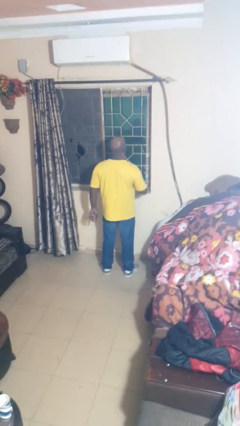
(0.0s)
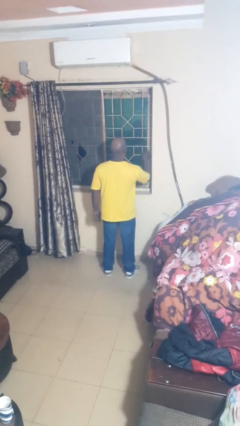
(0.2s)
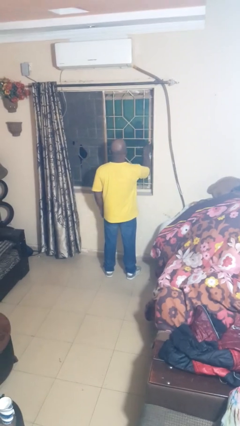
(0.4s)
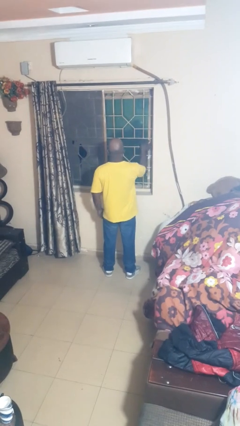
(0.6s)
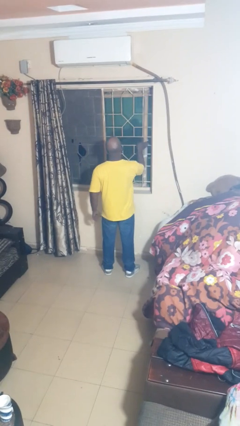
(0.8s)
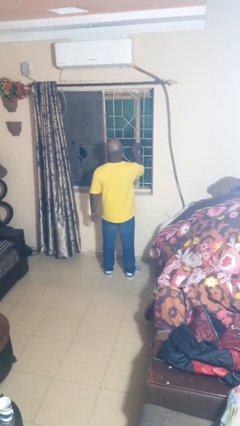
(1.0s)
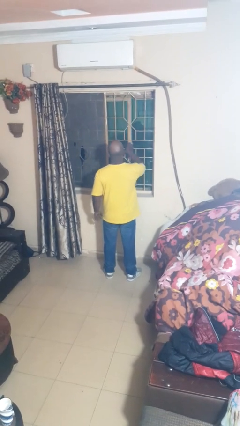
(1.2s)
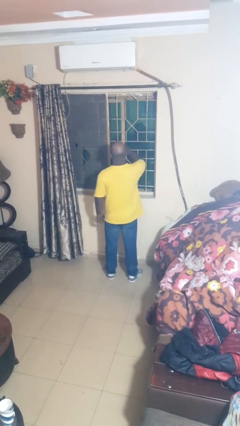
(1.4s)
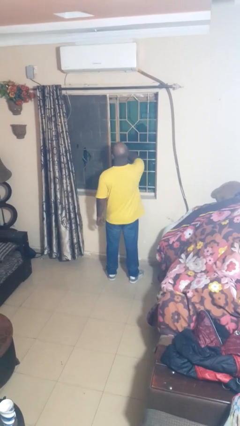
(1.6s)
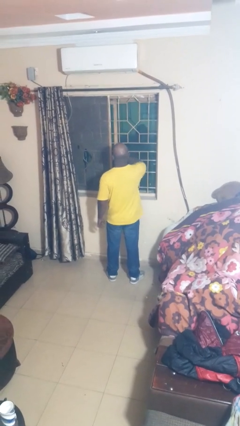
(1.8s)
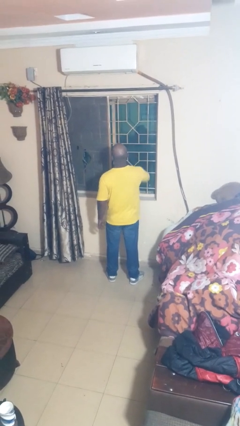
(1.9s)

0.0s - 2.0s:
person opens home window

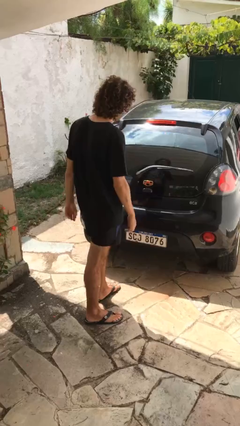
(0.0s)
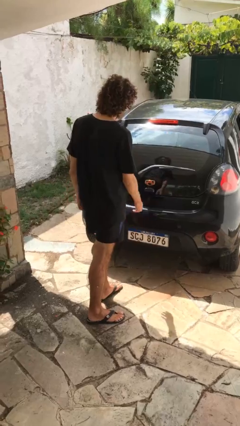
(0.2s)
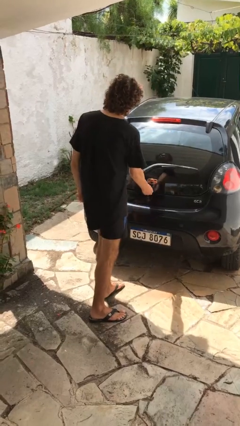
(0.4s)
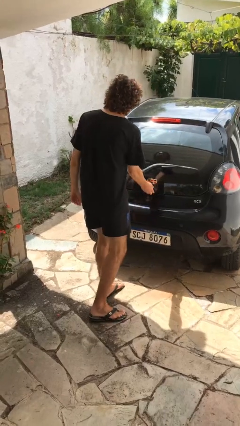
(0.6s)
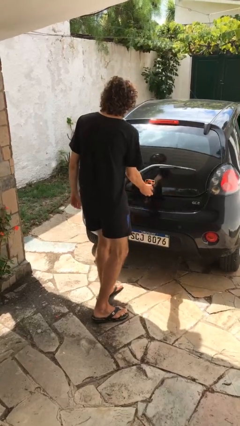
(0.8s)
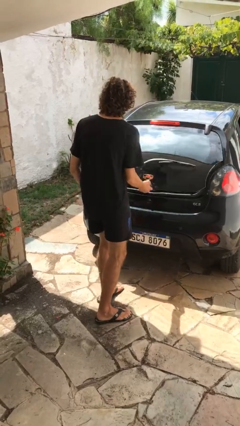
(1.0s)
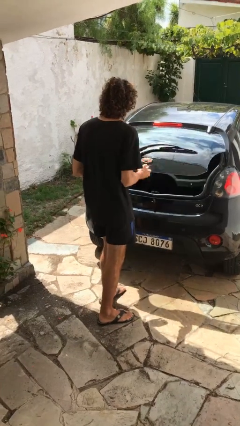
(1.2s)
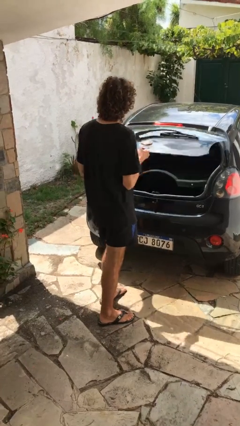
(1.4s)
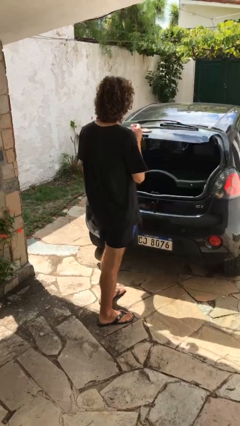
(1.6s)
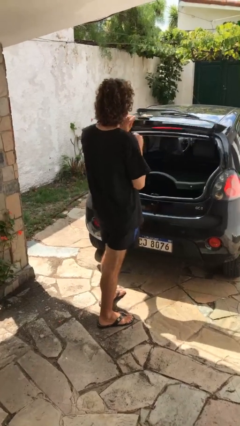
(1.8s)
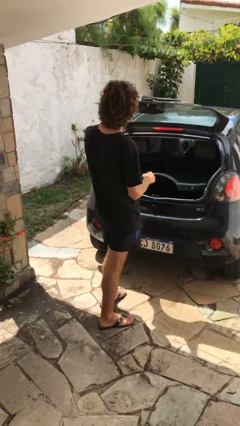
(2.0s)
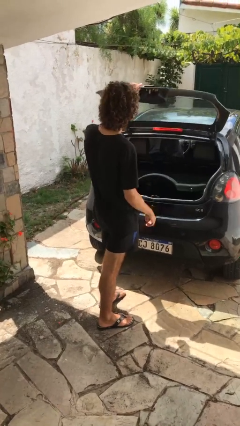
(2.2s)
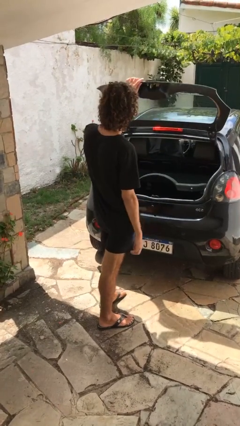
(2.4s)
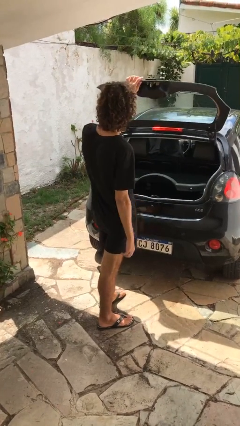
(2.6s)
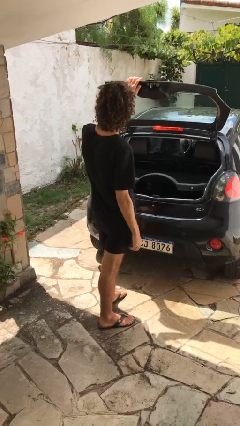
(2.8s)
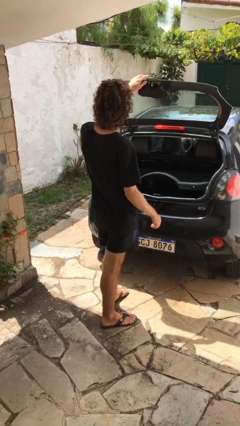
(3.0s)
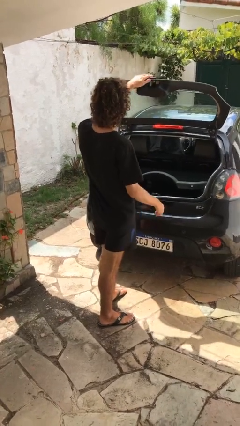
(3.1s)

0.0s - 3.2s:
person opens car trunk

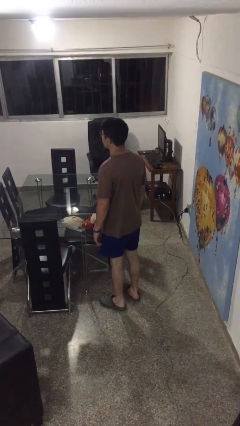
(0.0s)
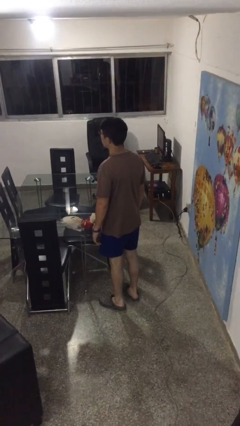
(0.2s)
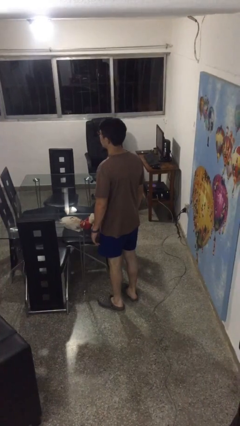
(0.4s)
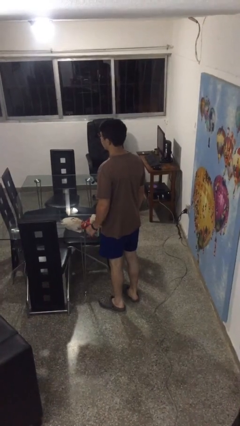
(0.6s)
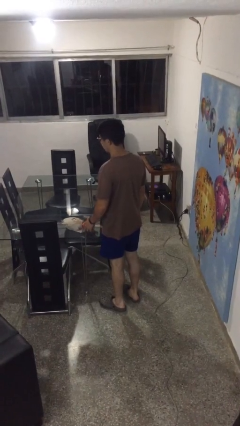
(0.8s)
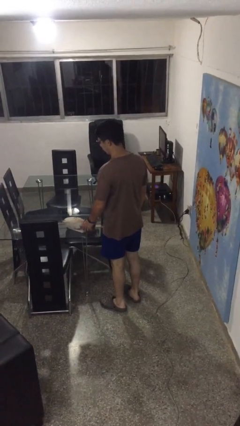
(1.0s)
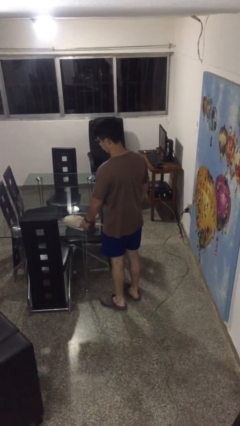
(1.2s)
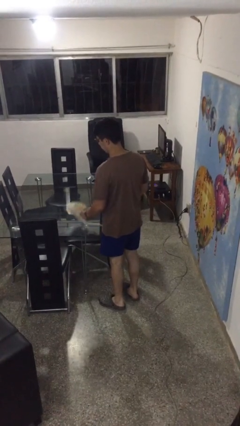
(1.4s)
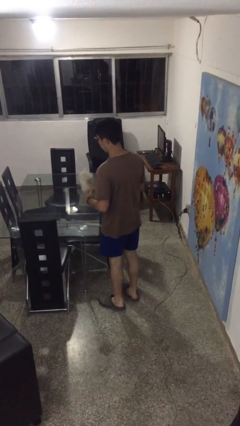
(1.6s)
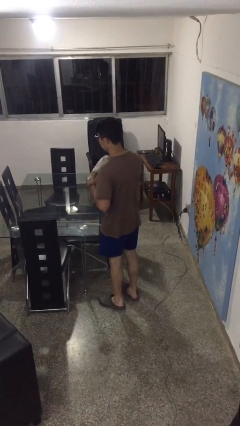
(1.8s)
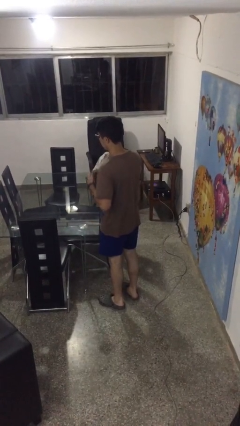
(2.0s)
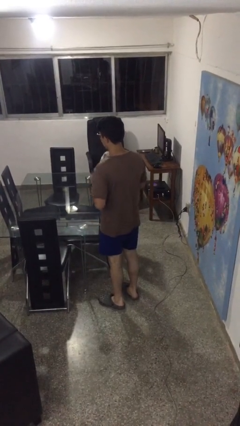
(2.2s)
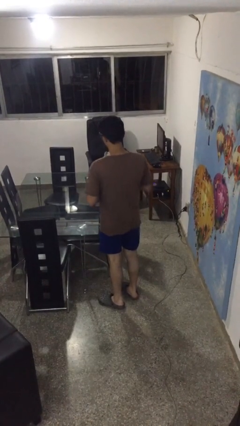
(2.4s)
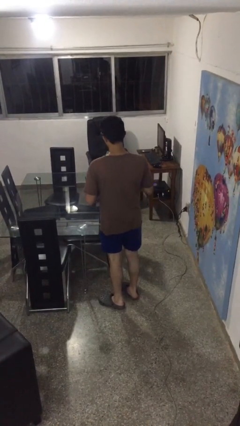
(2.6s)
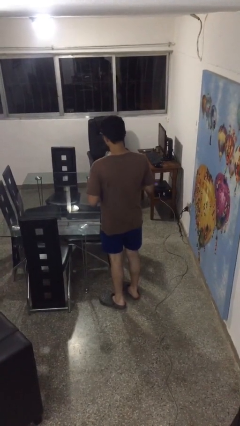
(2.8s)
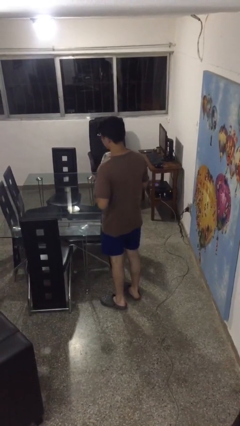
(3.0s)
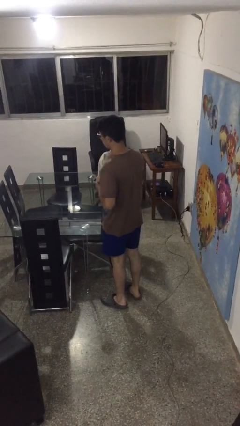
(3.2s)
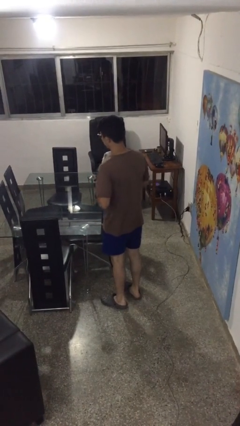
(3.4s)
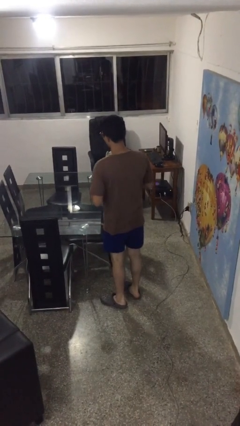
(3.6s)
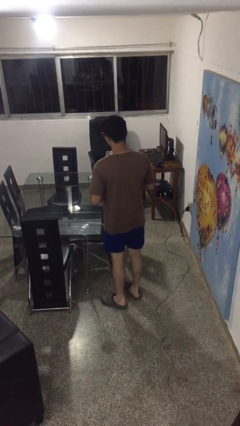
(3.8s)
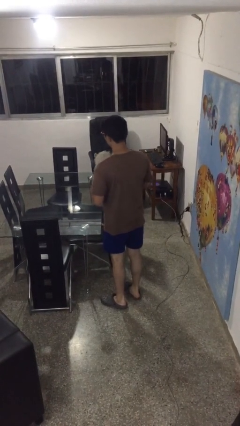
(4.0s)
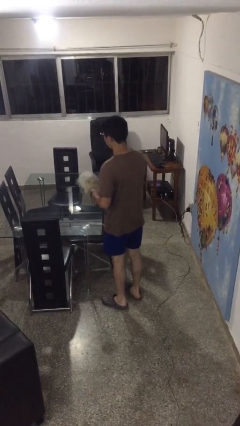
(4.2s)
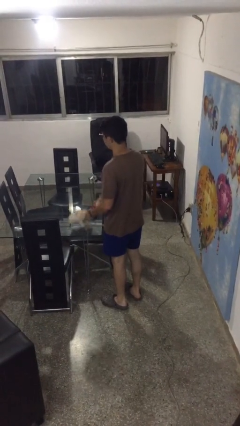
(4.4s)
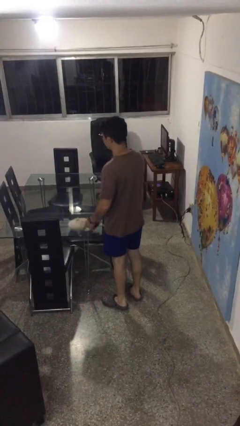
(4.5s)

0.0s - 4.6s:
person hugs stuffed animal

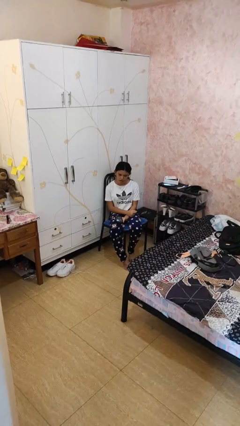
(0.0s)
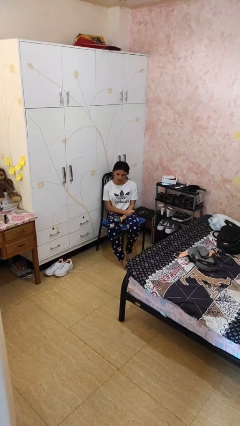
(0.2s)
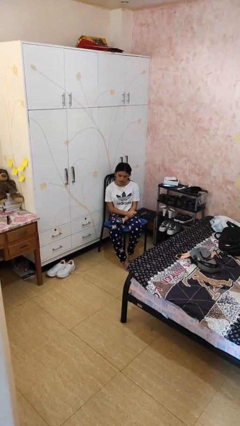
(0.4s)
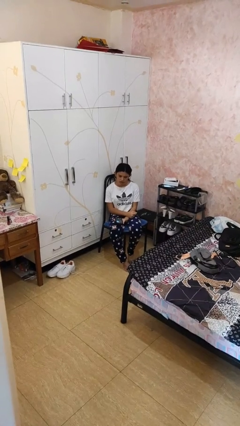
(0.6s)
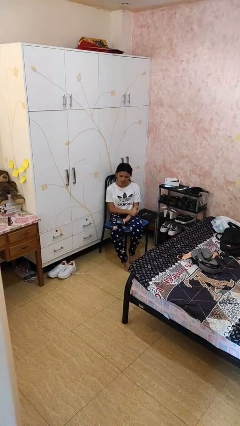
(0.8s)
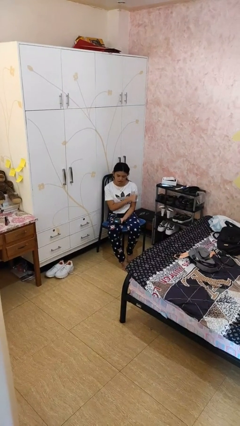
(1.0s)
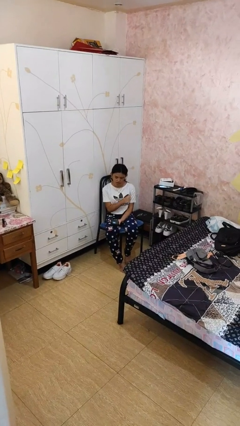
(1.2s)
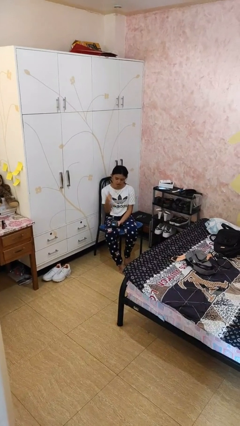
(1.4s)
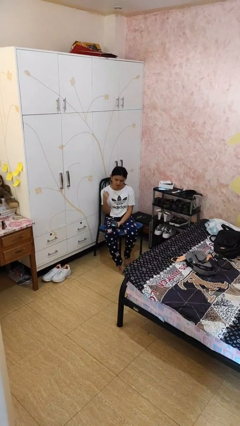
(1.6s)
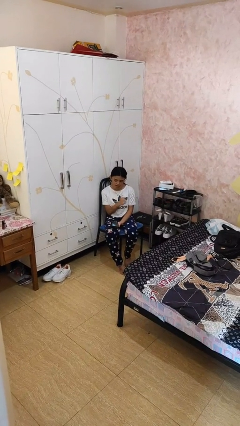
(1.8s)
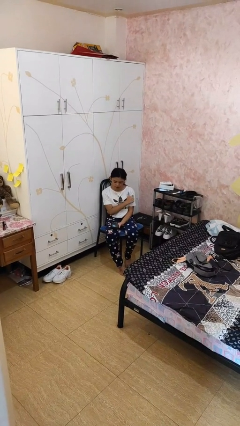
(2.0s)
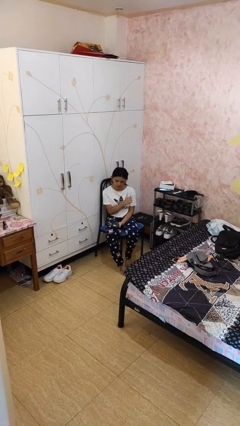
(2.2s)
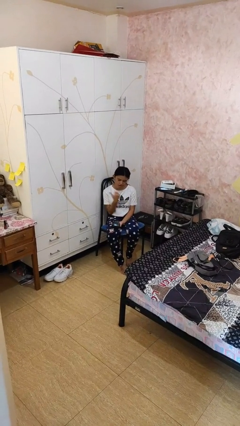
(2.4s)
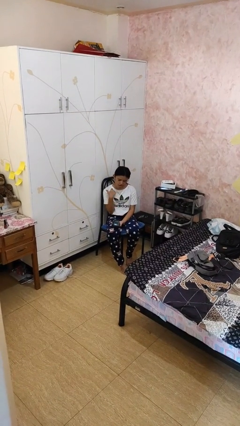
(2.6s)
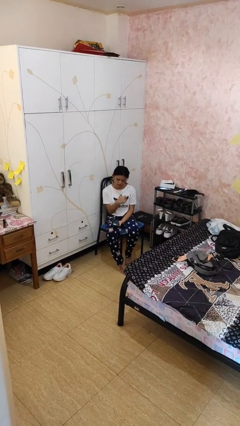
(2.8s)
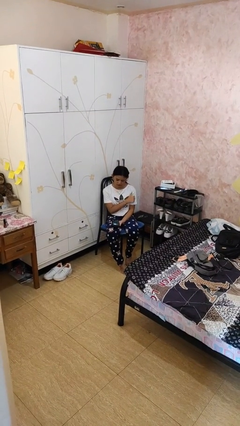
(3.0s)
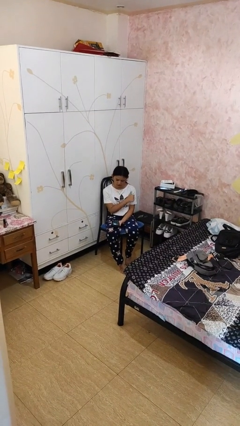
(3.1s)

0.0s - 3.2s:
person gestures cut

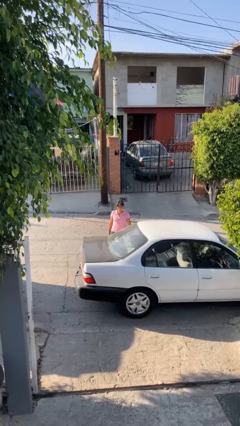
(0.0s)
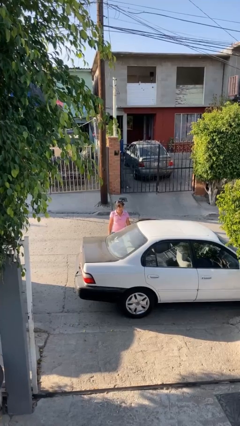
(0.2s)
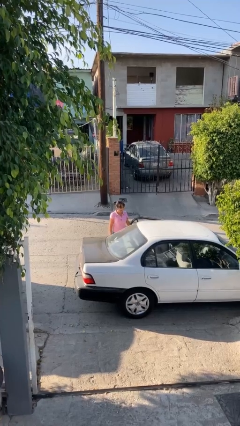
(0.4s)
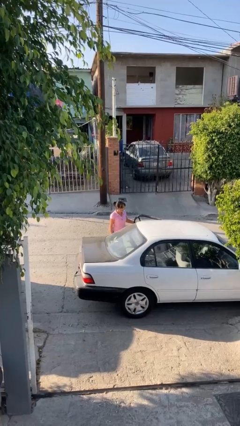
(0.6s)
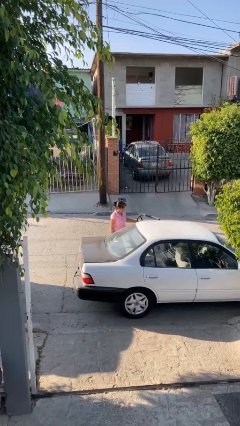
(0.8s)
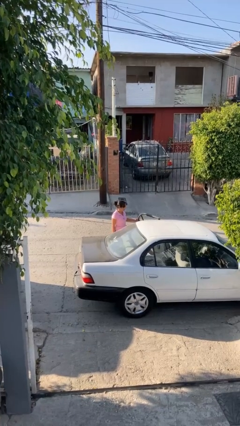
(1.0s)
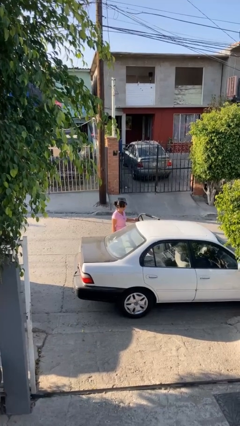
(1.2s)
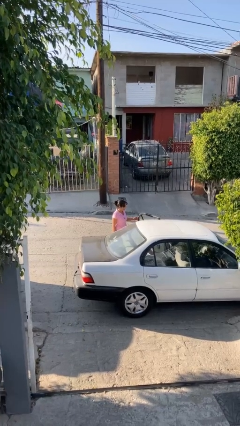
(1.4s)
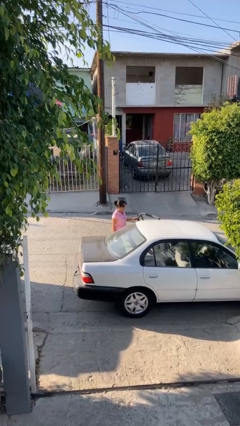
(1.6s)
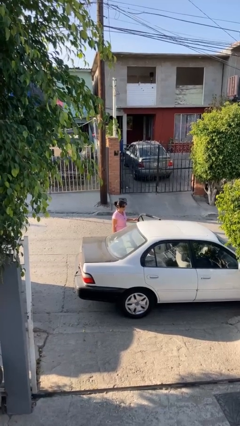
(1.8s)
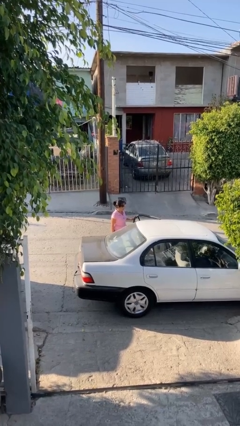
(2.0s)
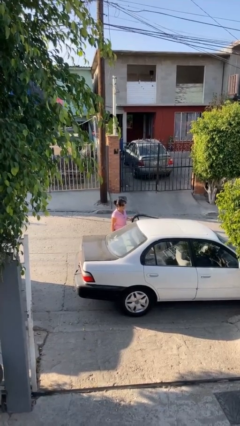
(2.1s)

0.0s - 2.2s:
person opens car door

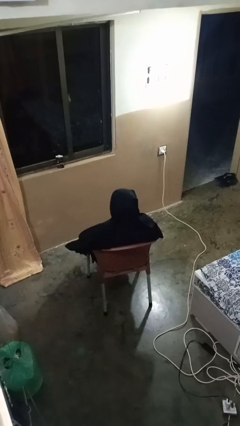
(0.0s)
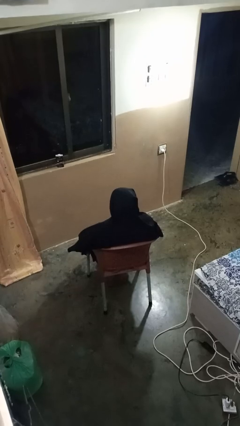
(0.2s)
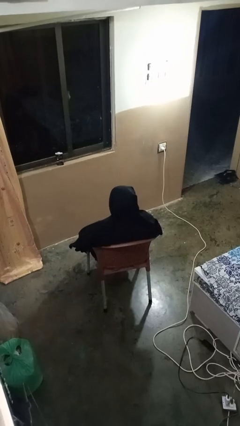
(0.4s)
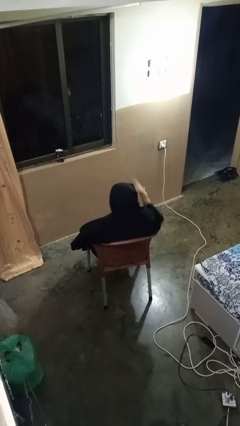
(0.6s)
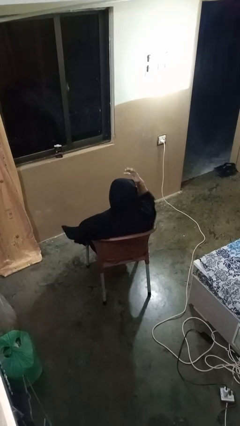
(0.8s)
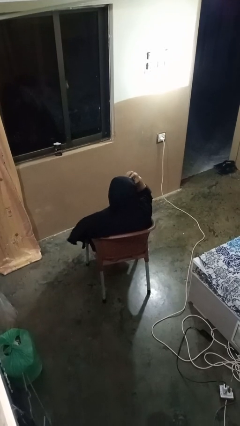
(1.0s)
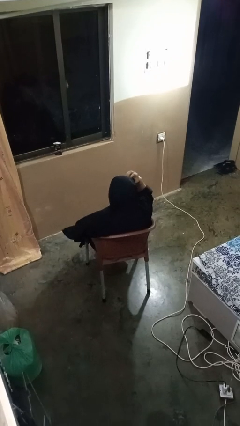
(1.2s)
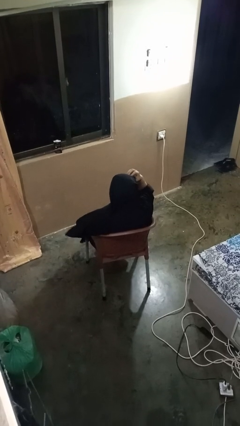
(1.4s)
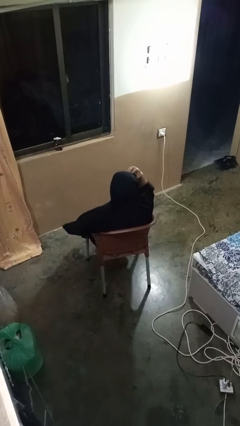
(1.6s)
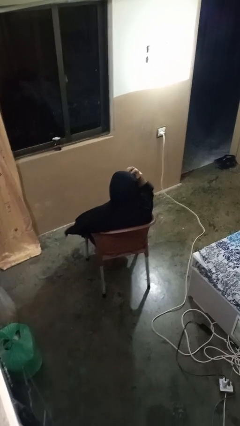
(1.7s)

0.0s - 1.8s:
person scratches face

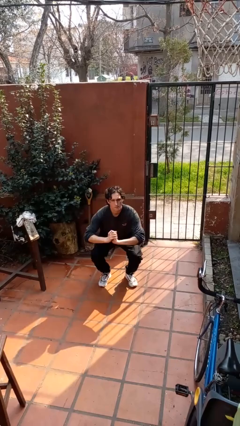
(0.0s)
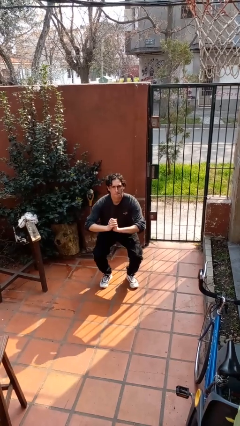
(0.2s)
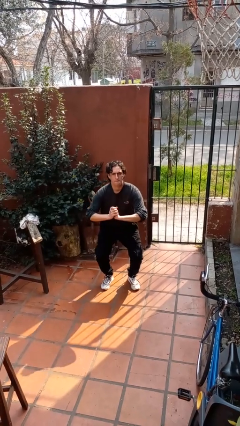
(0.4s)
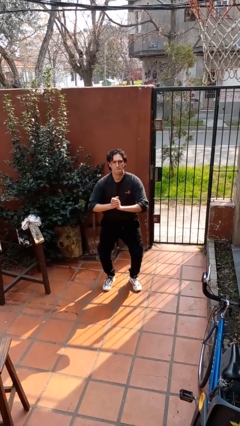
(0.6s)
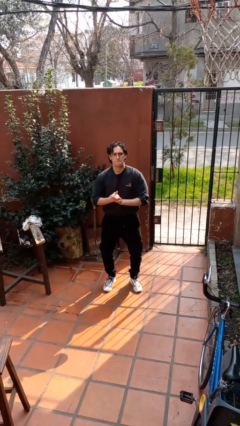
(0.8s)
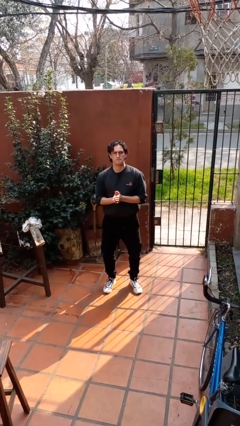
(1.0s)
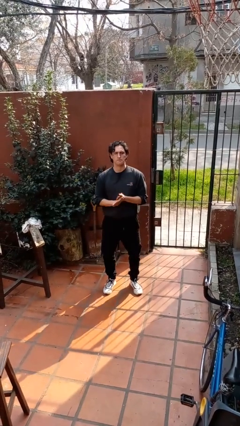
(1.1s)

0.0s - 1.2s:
person stands up
